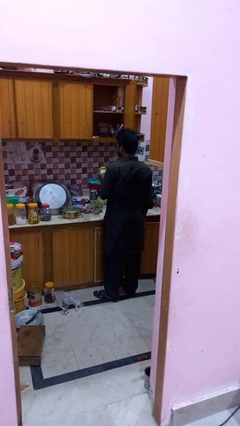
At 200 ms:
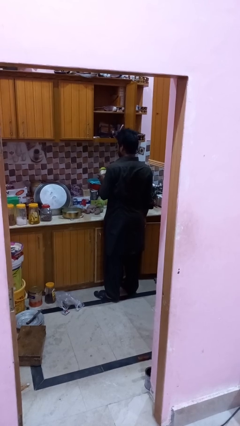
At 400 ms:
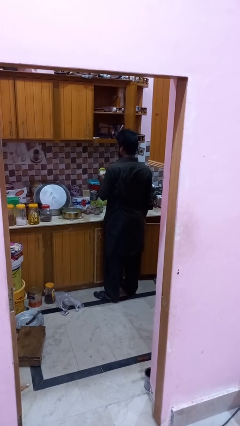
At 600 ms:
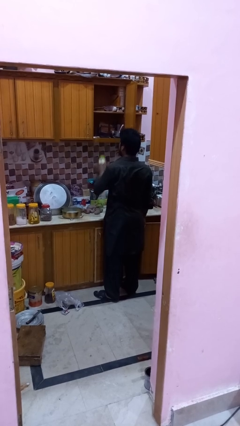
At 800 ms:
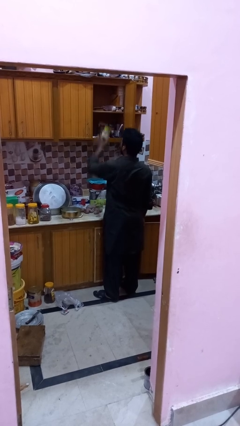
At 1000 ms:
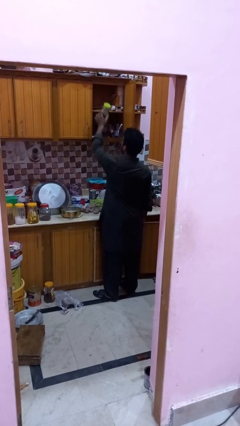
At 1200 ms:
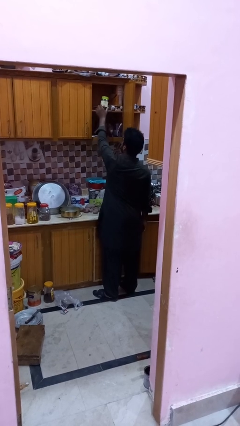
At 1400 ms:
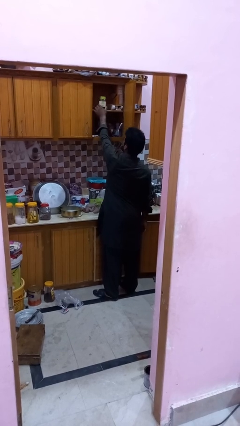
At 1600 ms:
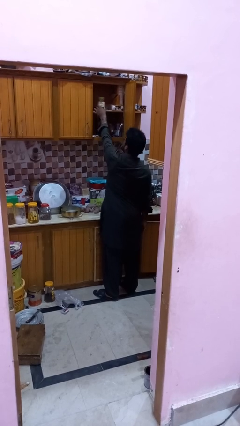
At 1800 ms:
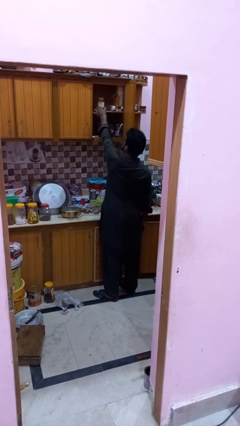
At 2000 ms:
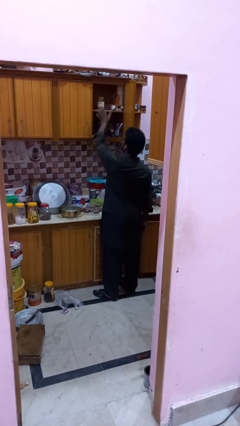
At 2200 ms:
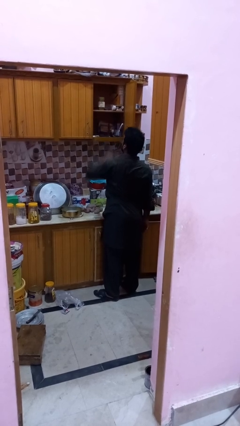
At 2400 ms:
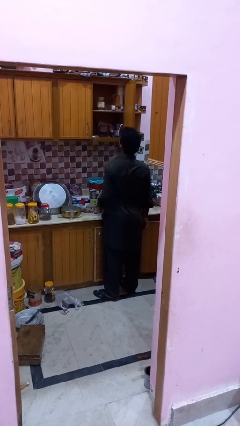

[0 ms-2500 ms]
person puts object in cabinet

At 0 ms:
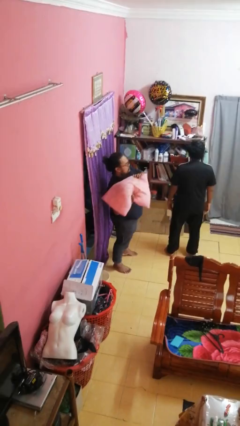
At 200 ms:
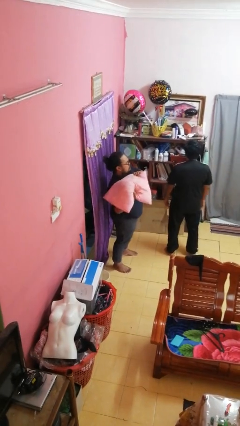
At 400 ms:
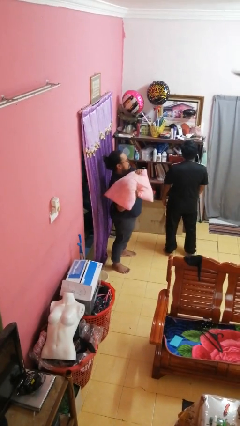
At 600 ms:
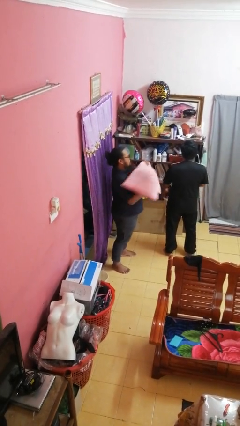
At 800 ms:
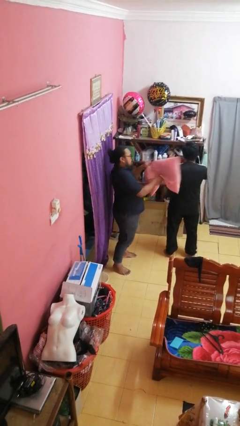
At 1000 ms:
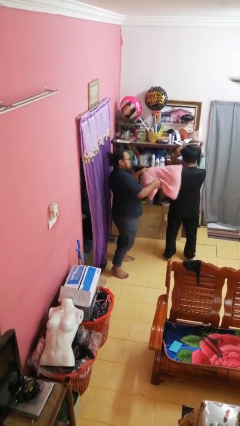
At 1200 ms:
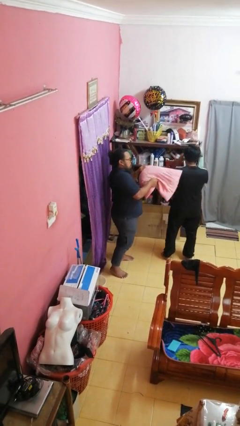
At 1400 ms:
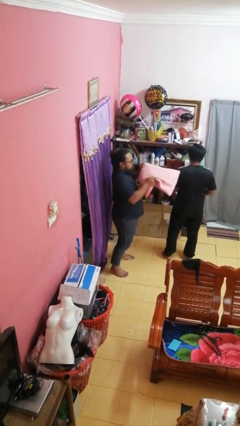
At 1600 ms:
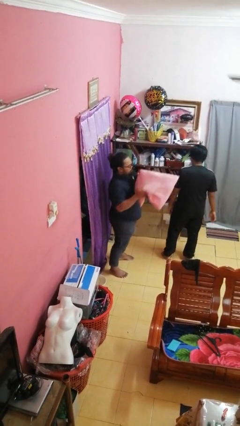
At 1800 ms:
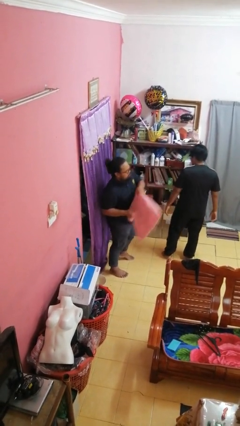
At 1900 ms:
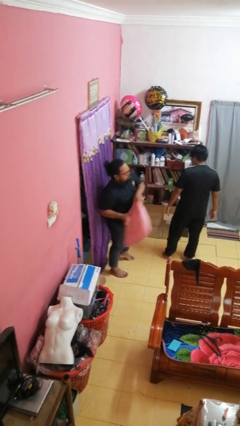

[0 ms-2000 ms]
person hits person with pillow

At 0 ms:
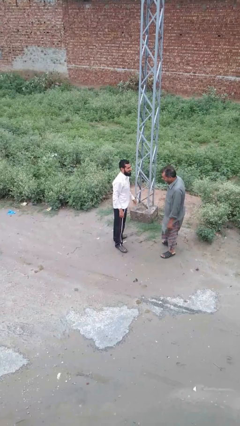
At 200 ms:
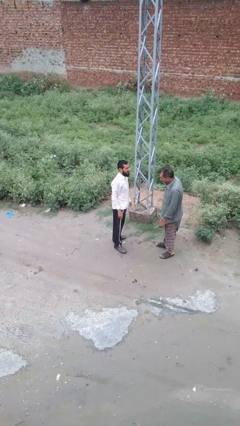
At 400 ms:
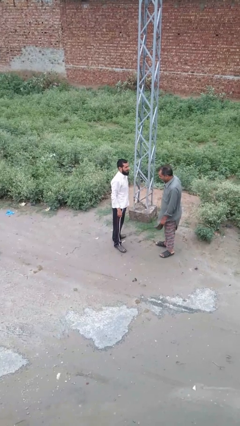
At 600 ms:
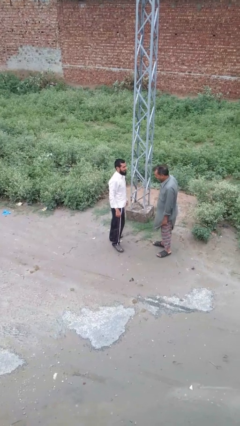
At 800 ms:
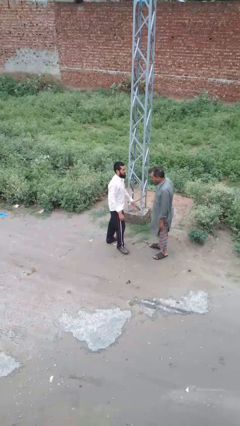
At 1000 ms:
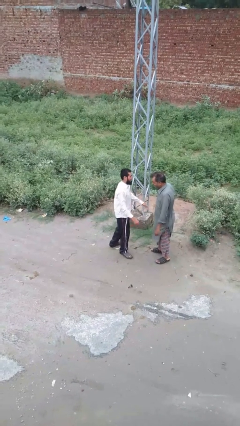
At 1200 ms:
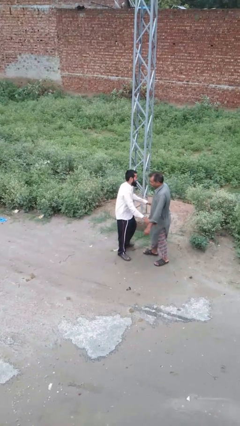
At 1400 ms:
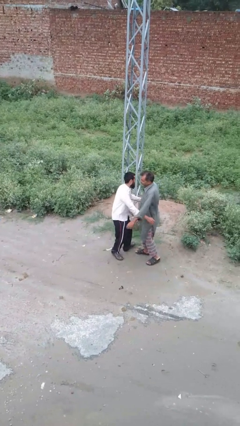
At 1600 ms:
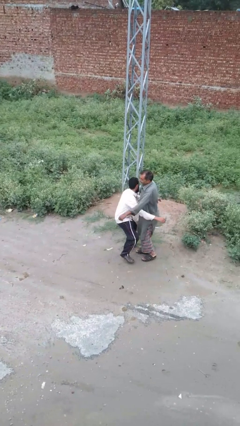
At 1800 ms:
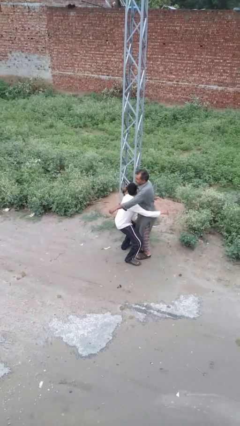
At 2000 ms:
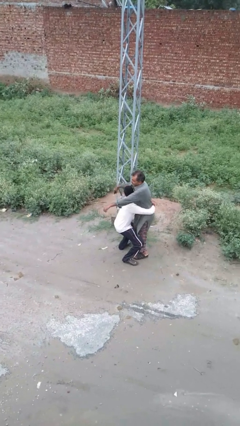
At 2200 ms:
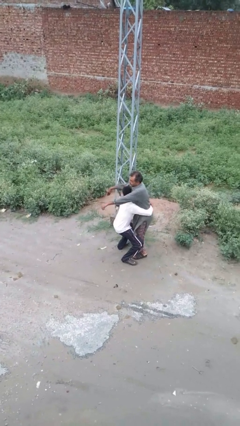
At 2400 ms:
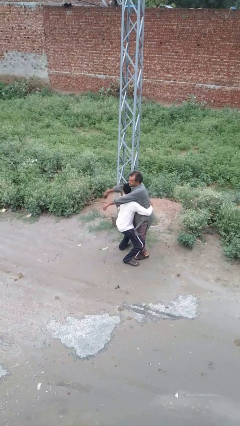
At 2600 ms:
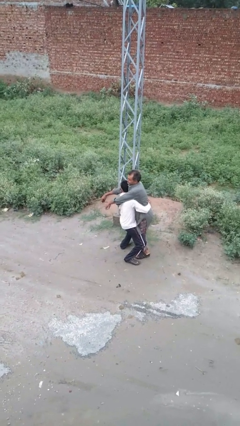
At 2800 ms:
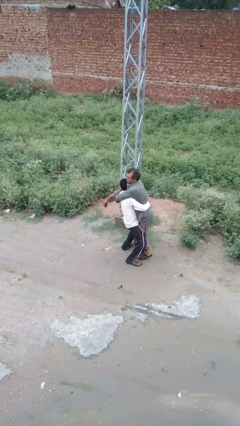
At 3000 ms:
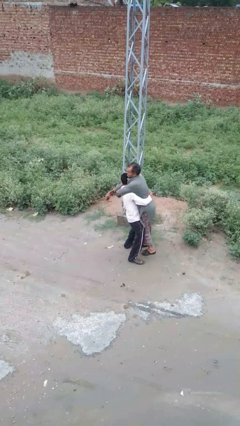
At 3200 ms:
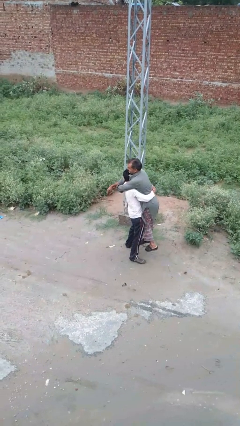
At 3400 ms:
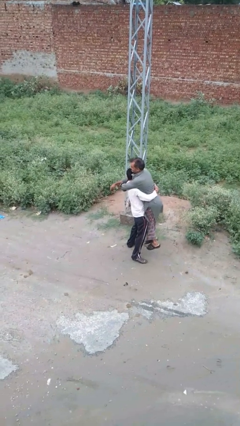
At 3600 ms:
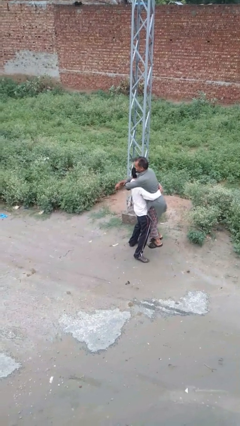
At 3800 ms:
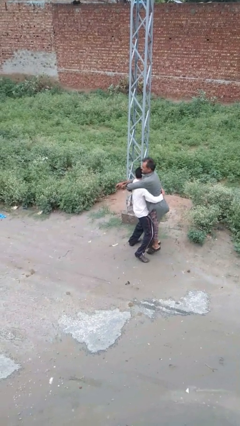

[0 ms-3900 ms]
person picks up person

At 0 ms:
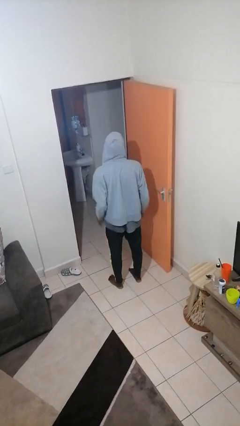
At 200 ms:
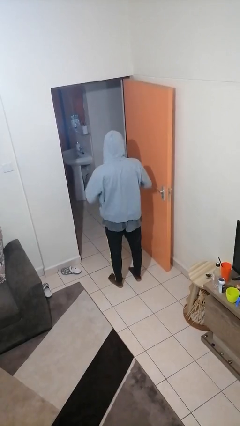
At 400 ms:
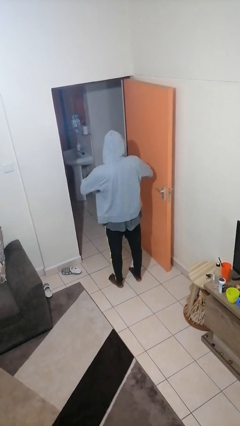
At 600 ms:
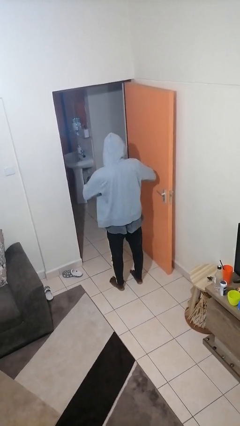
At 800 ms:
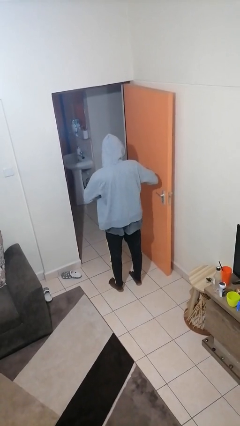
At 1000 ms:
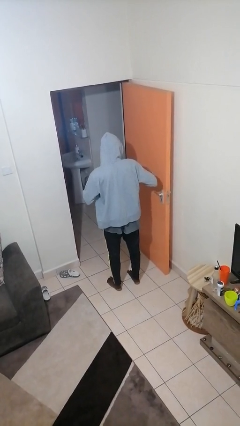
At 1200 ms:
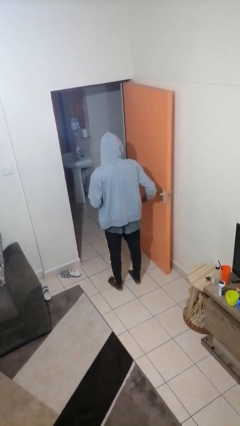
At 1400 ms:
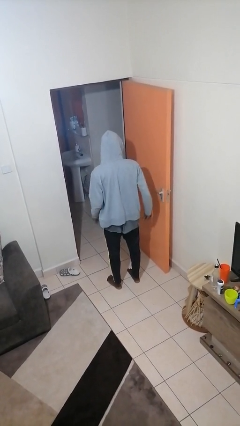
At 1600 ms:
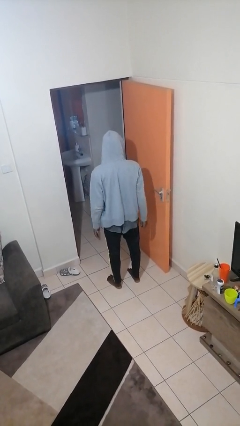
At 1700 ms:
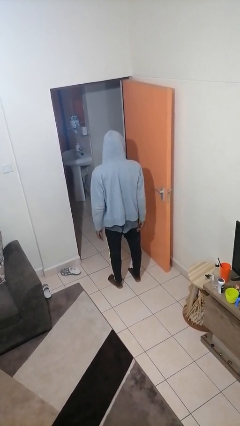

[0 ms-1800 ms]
person takes off ring

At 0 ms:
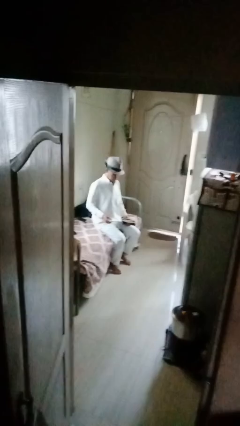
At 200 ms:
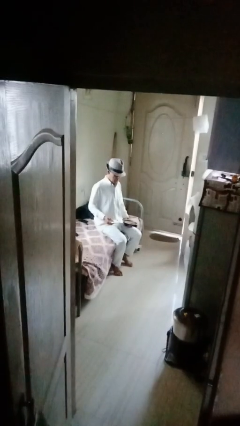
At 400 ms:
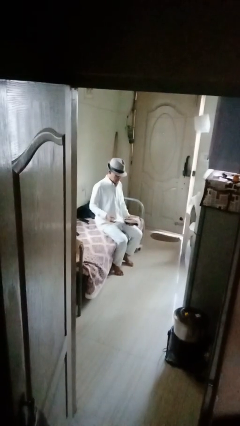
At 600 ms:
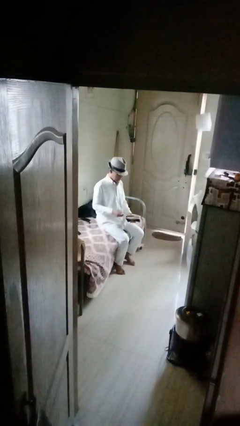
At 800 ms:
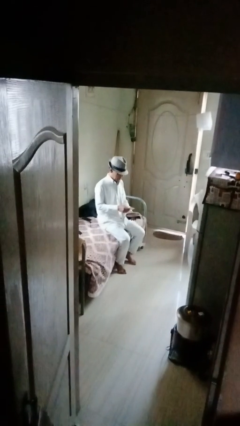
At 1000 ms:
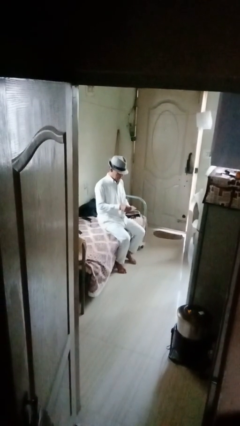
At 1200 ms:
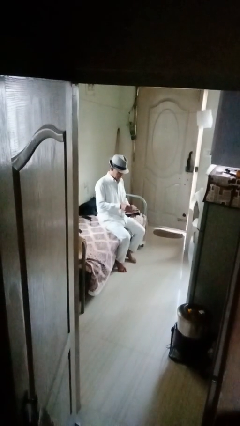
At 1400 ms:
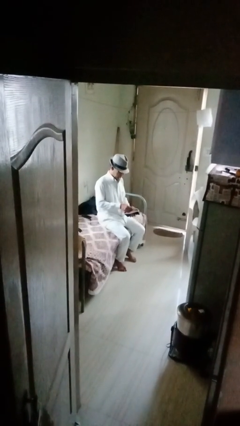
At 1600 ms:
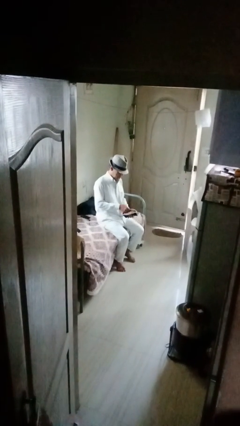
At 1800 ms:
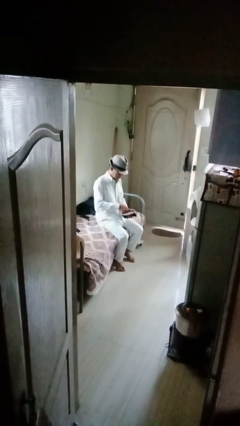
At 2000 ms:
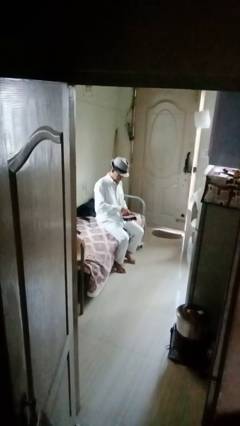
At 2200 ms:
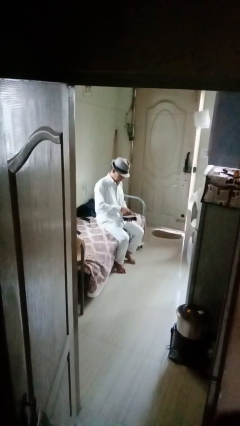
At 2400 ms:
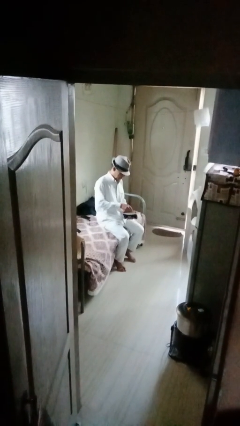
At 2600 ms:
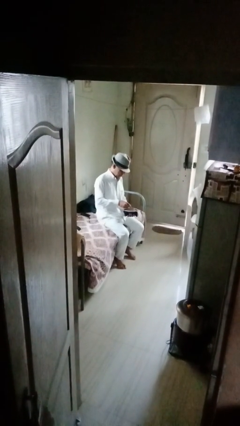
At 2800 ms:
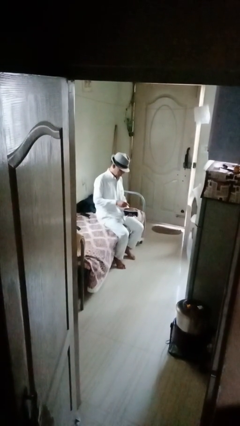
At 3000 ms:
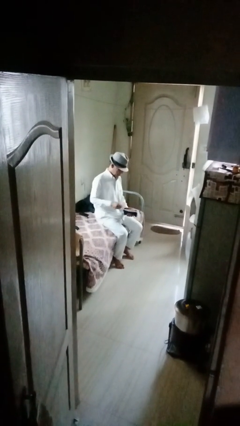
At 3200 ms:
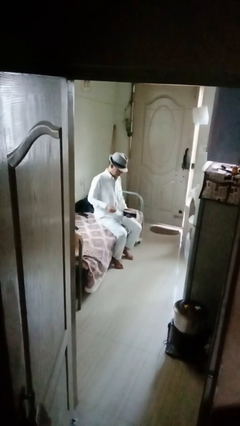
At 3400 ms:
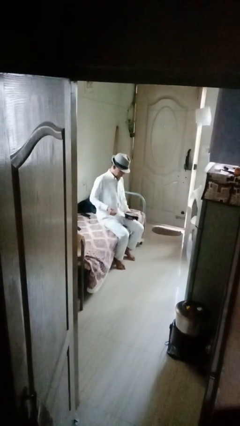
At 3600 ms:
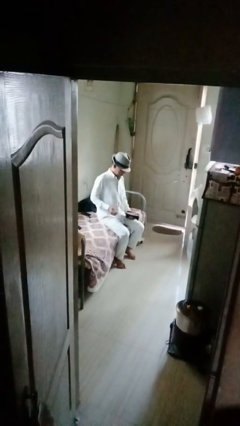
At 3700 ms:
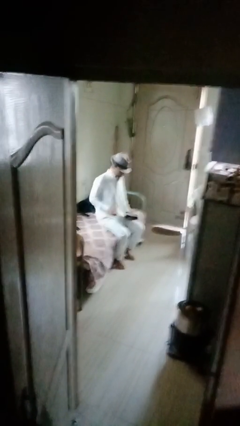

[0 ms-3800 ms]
person puts object into purse

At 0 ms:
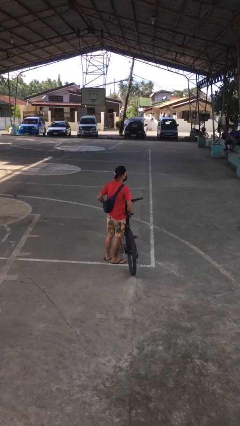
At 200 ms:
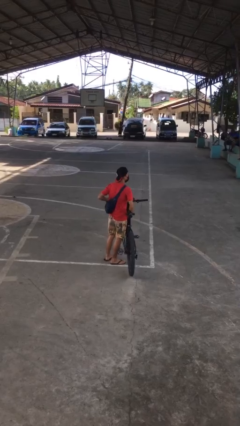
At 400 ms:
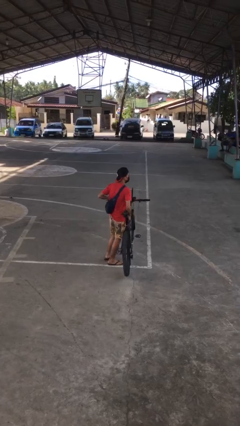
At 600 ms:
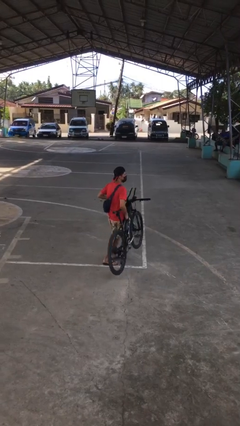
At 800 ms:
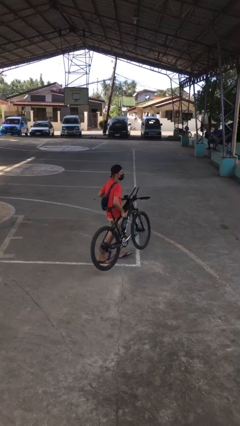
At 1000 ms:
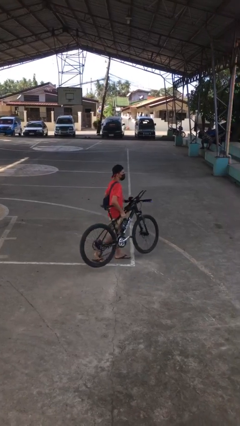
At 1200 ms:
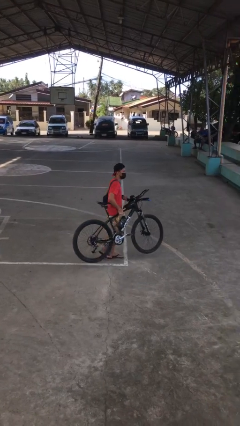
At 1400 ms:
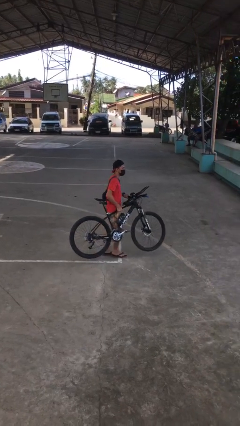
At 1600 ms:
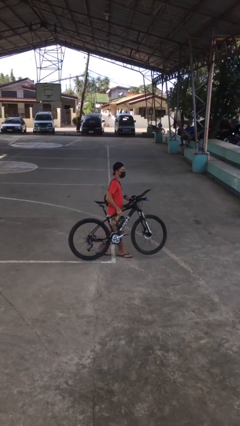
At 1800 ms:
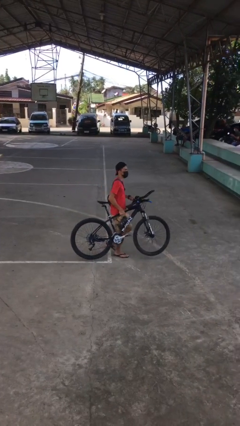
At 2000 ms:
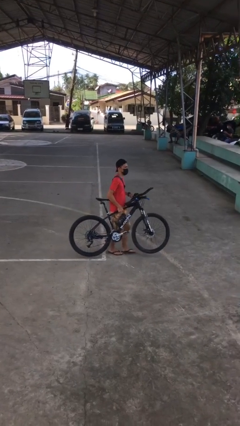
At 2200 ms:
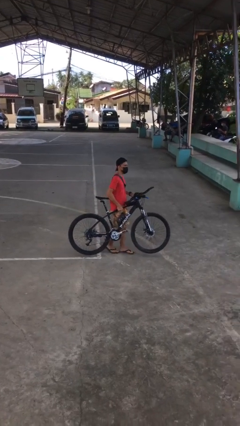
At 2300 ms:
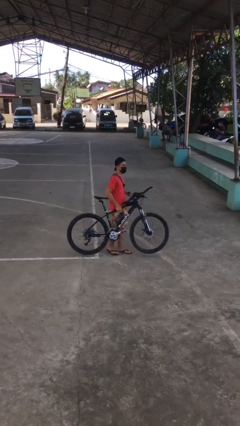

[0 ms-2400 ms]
person carries bicycle

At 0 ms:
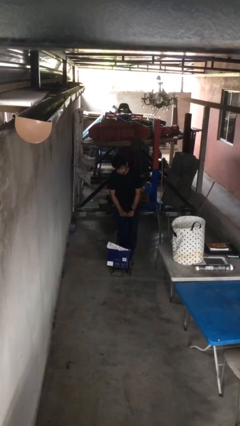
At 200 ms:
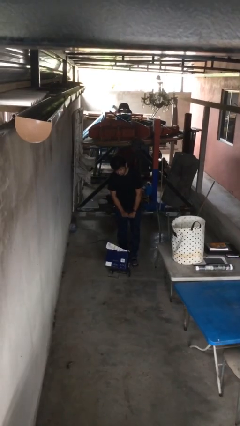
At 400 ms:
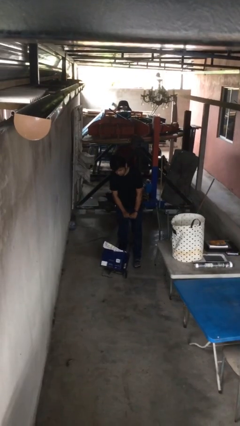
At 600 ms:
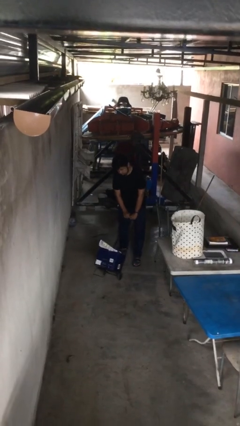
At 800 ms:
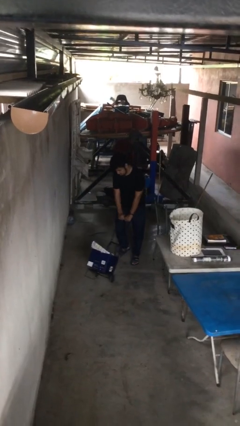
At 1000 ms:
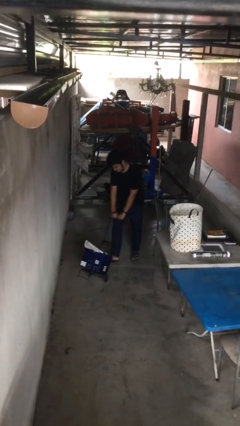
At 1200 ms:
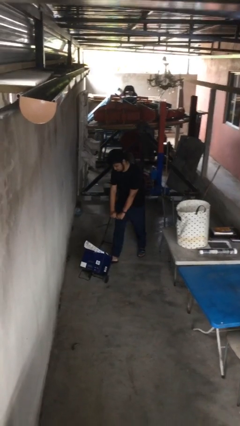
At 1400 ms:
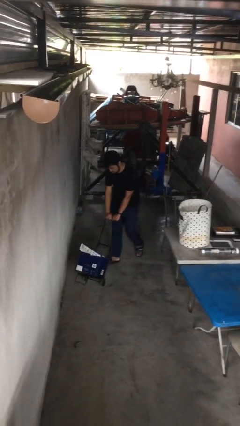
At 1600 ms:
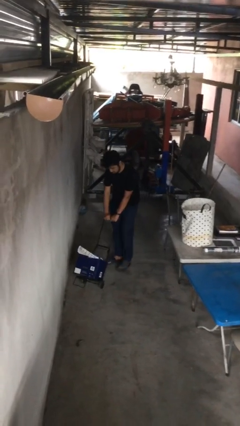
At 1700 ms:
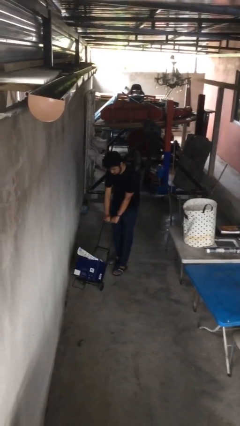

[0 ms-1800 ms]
person pushes wheeled cart
